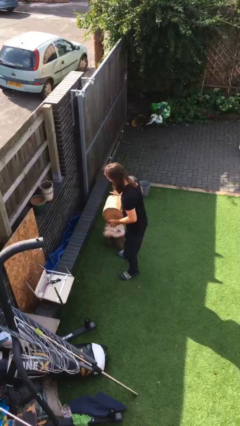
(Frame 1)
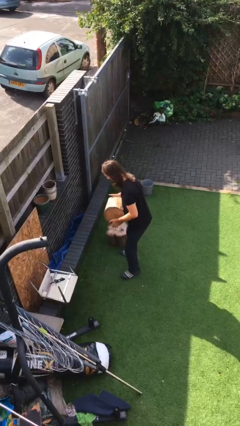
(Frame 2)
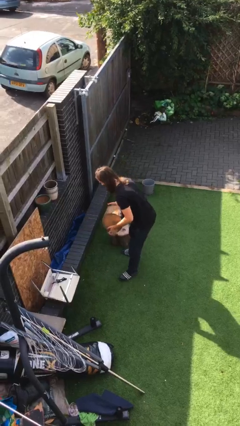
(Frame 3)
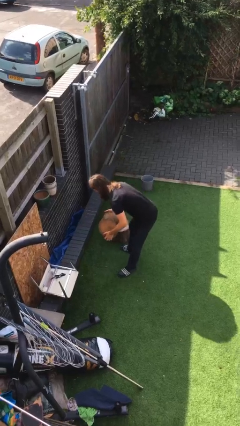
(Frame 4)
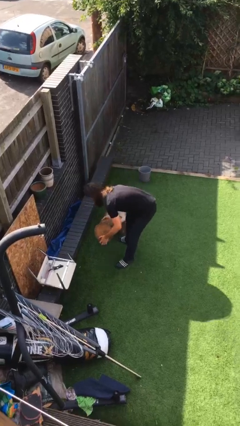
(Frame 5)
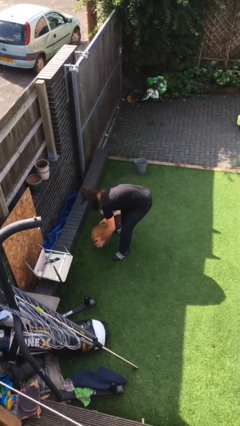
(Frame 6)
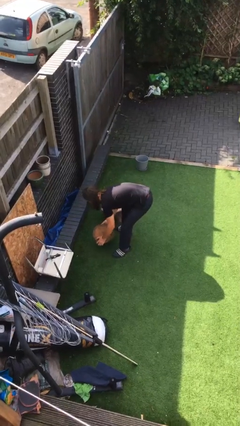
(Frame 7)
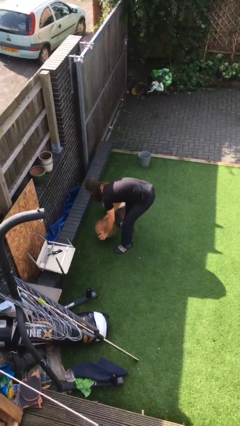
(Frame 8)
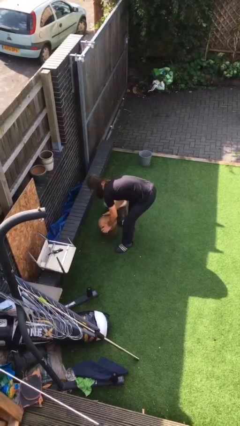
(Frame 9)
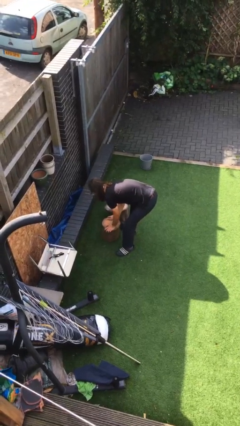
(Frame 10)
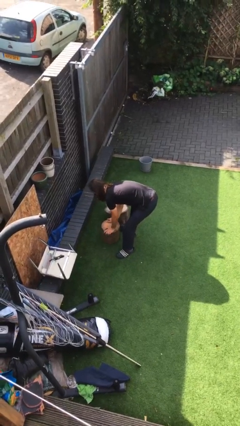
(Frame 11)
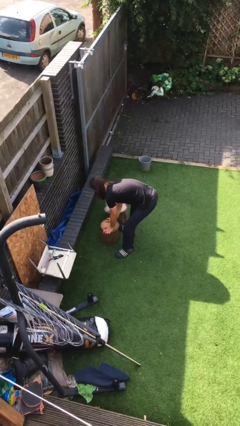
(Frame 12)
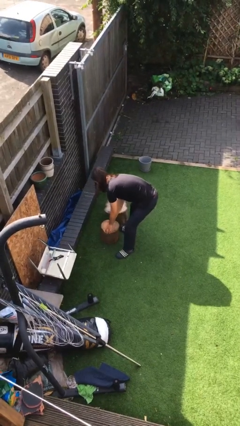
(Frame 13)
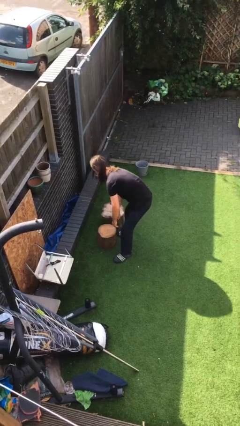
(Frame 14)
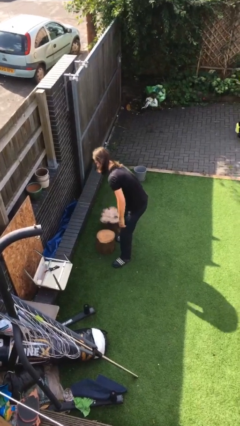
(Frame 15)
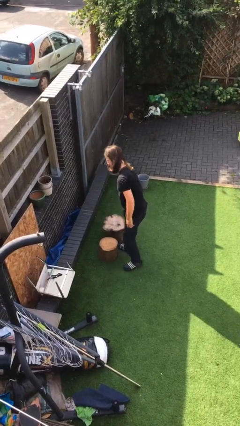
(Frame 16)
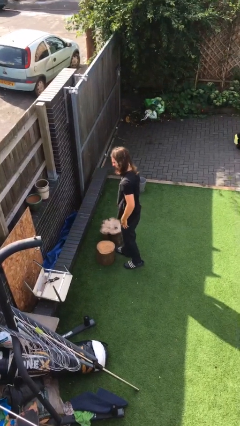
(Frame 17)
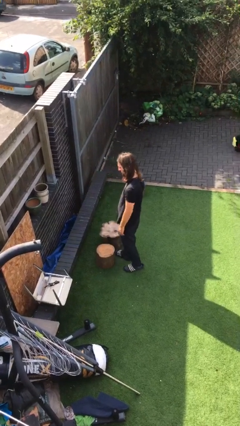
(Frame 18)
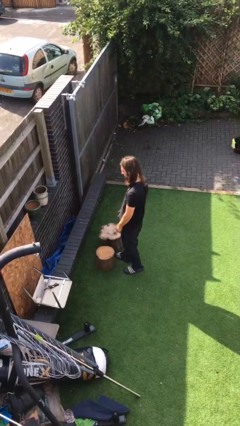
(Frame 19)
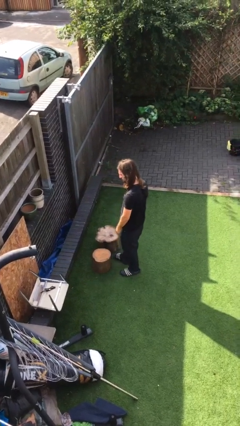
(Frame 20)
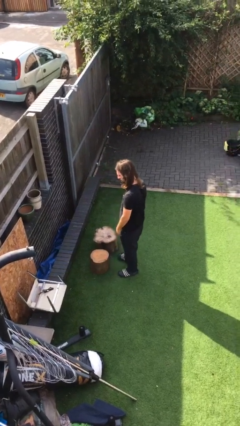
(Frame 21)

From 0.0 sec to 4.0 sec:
person puts down object on floor

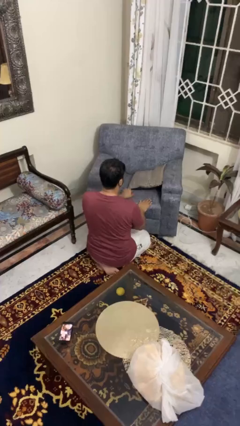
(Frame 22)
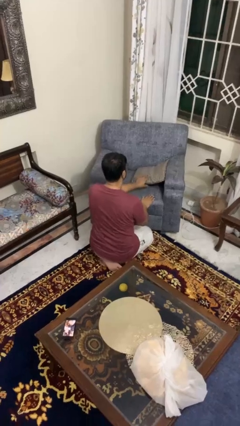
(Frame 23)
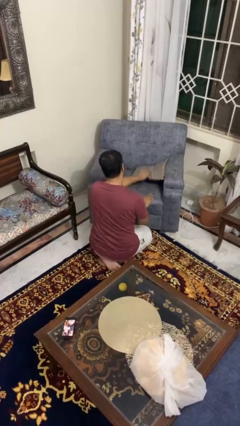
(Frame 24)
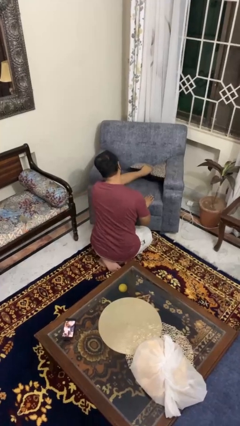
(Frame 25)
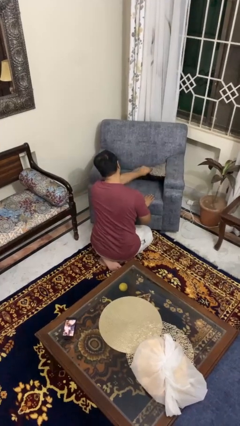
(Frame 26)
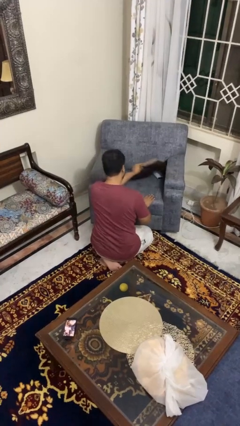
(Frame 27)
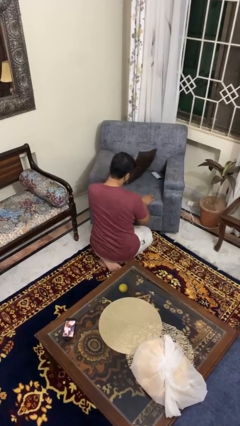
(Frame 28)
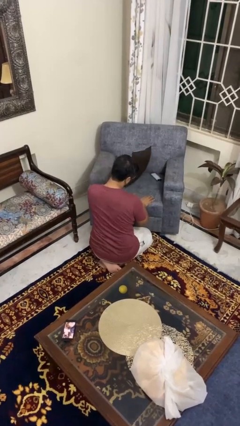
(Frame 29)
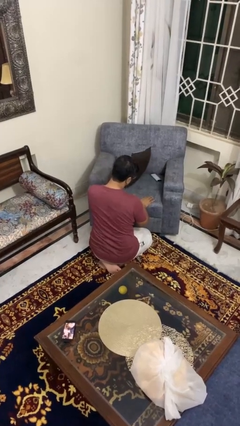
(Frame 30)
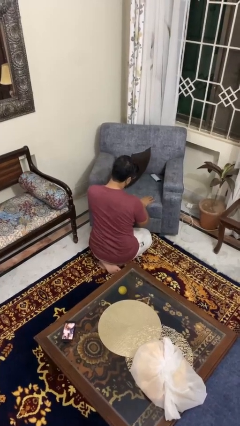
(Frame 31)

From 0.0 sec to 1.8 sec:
person searches in couch

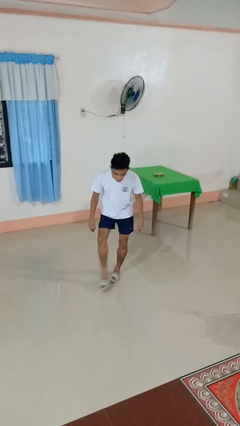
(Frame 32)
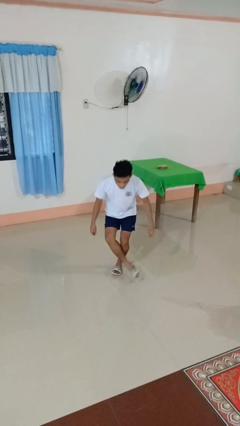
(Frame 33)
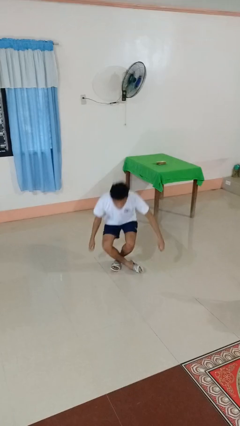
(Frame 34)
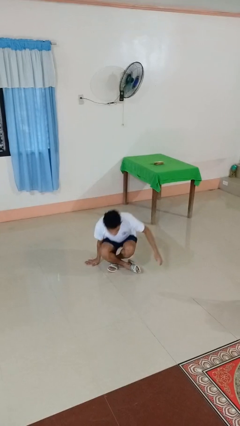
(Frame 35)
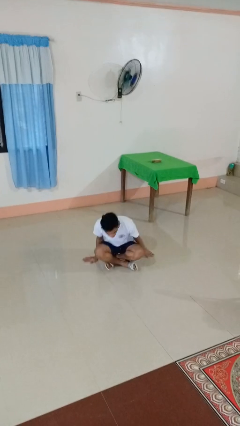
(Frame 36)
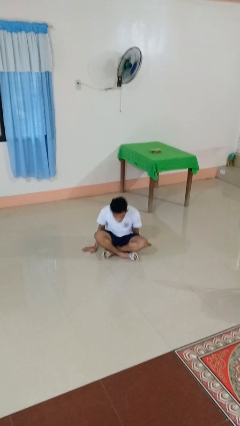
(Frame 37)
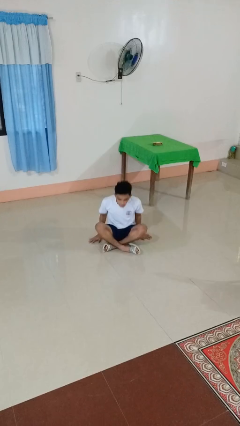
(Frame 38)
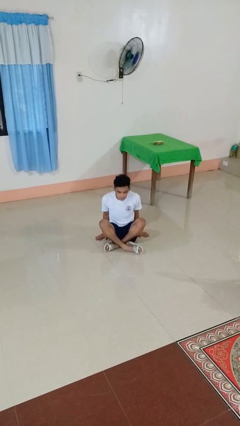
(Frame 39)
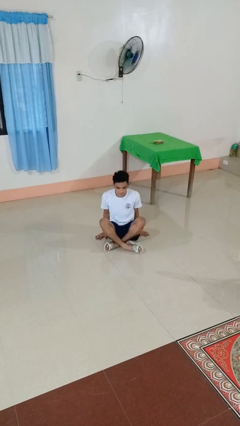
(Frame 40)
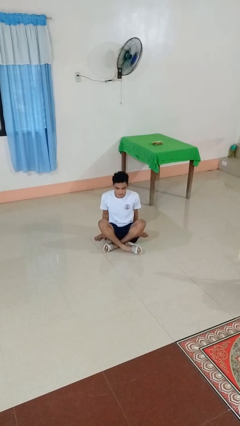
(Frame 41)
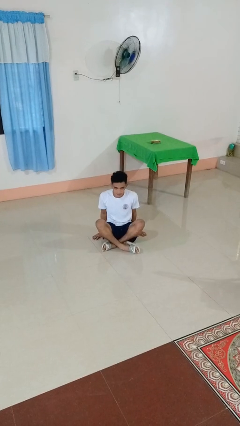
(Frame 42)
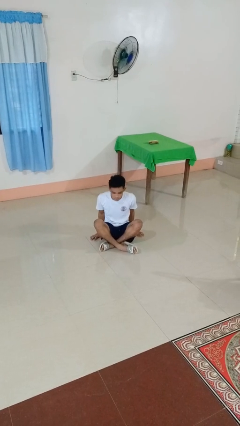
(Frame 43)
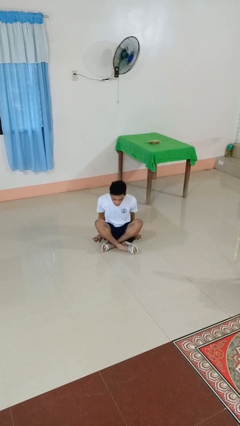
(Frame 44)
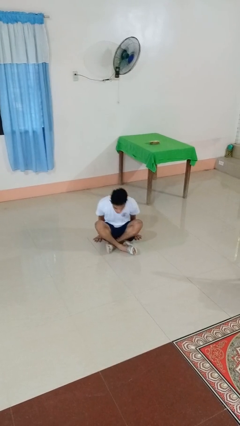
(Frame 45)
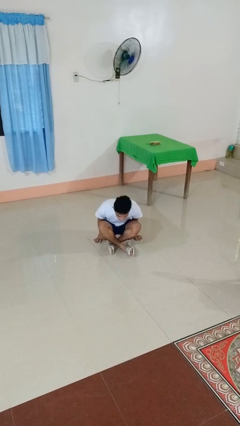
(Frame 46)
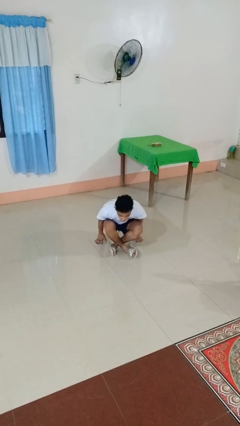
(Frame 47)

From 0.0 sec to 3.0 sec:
person sits crisscross

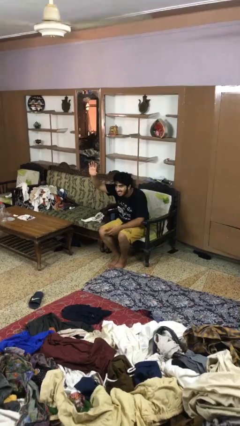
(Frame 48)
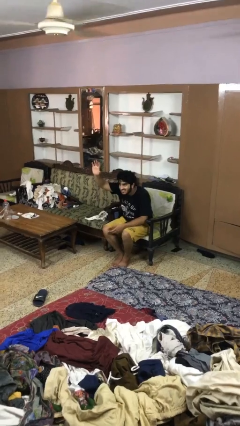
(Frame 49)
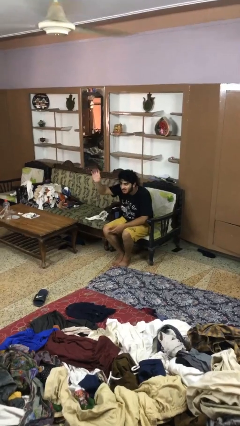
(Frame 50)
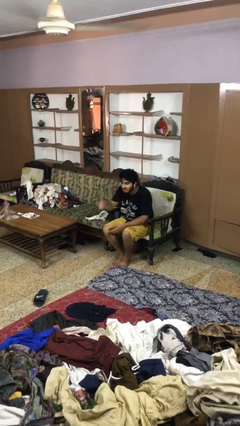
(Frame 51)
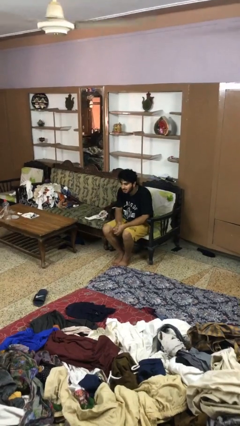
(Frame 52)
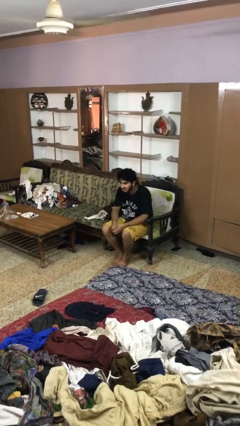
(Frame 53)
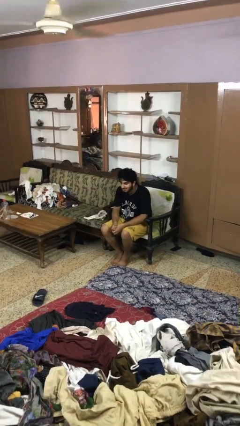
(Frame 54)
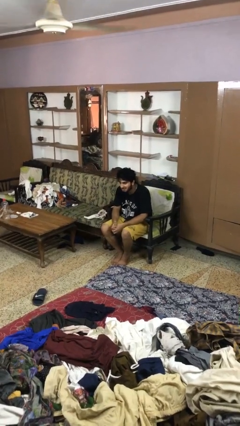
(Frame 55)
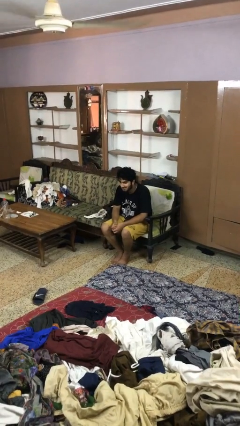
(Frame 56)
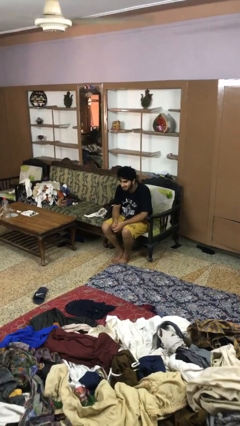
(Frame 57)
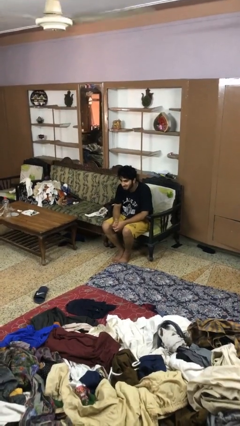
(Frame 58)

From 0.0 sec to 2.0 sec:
person gestures lower hand

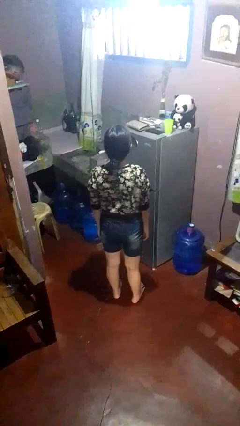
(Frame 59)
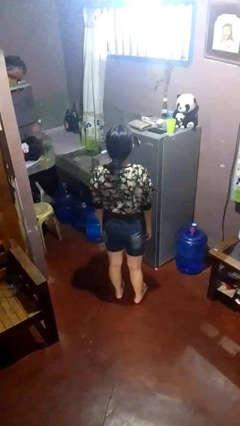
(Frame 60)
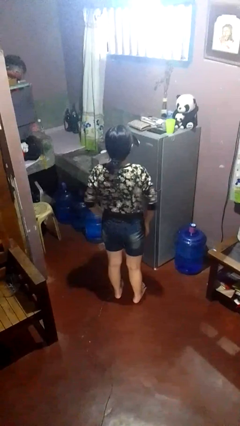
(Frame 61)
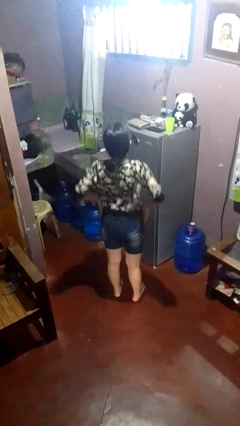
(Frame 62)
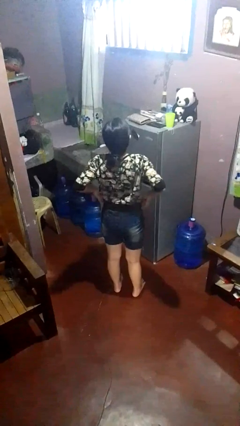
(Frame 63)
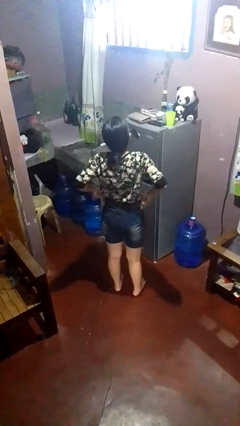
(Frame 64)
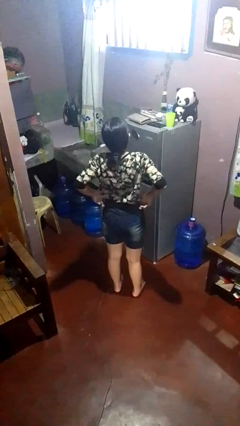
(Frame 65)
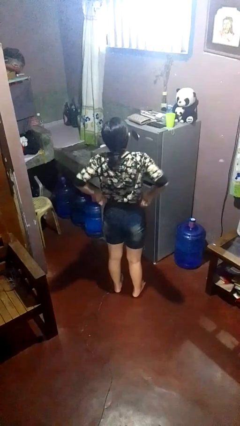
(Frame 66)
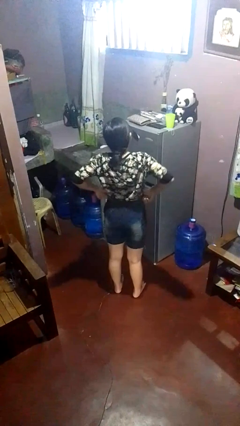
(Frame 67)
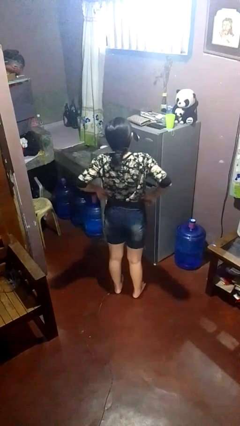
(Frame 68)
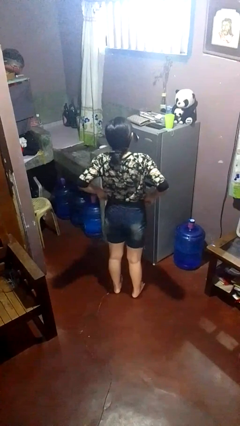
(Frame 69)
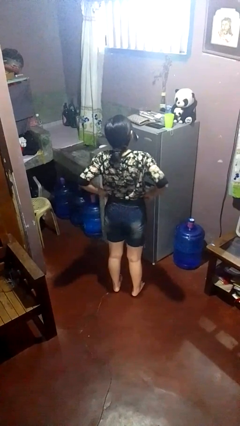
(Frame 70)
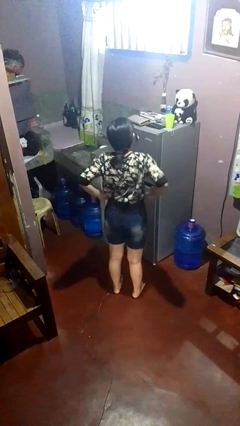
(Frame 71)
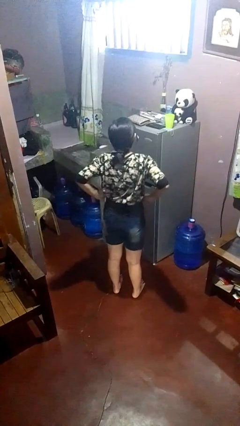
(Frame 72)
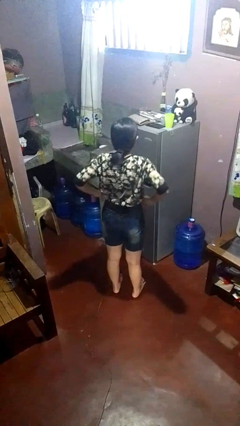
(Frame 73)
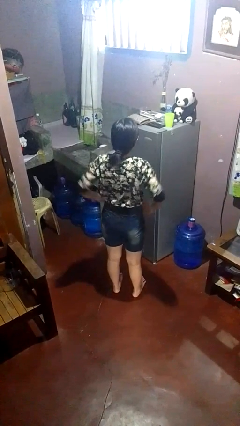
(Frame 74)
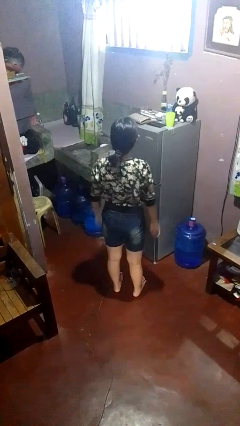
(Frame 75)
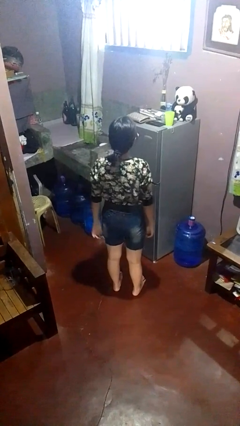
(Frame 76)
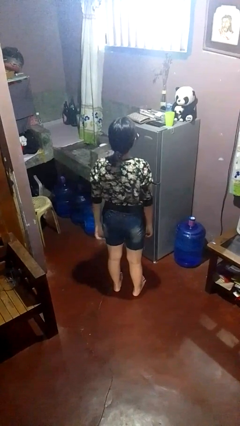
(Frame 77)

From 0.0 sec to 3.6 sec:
person hikes up pants

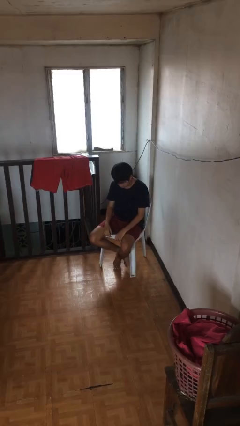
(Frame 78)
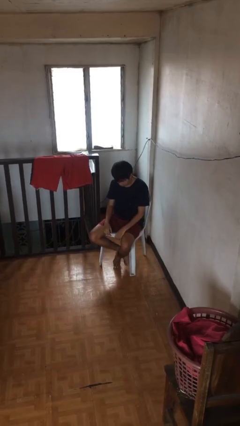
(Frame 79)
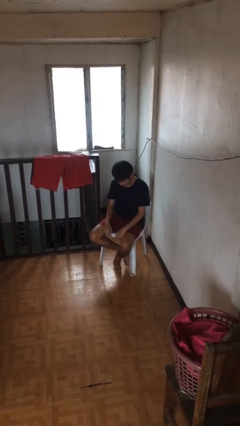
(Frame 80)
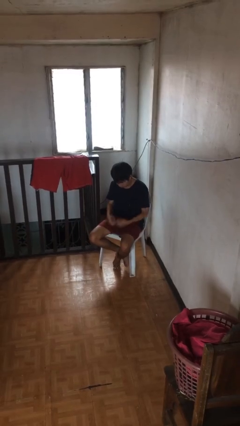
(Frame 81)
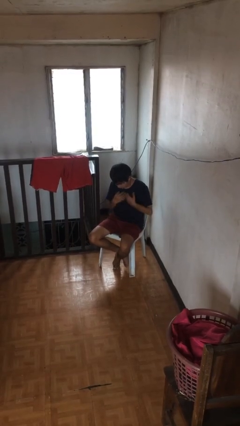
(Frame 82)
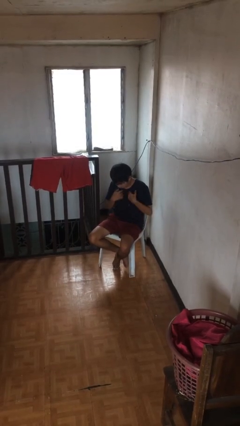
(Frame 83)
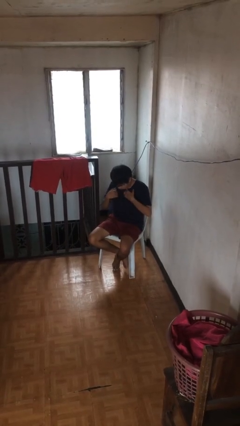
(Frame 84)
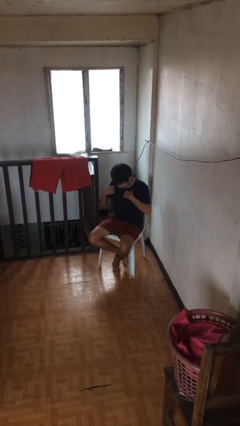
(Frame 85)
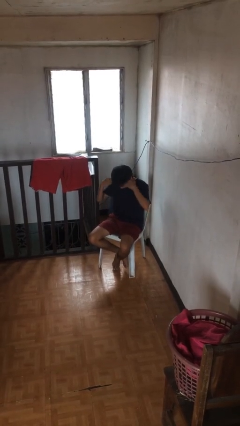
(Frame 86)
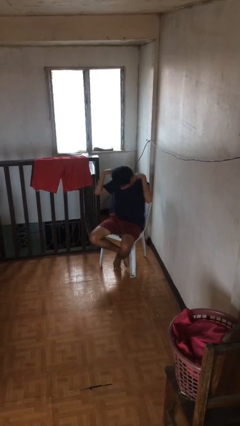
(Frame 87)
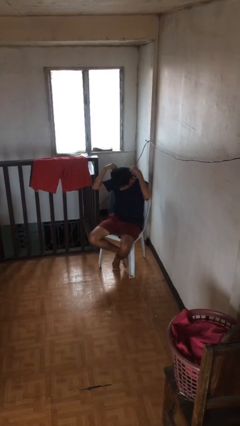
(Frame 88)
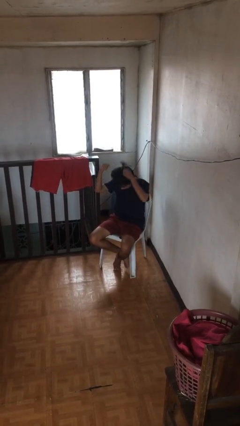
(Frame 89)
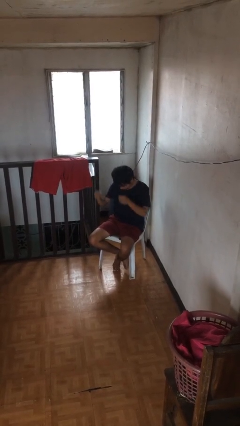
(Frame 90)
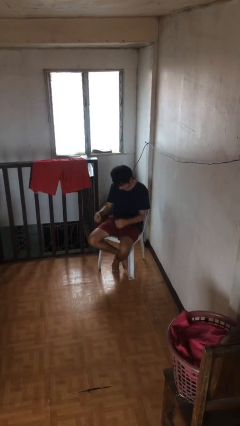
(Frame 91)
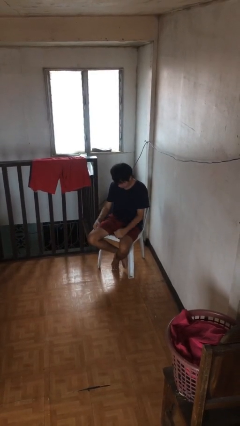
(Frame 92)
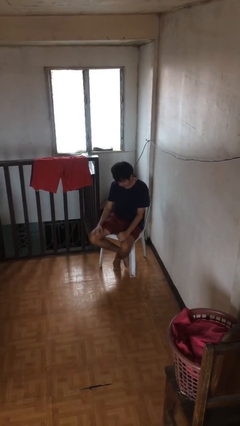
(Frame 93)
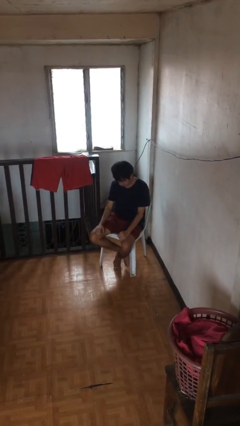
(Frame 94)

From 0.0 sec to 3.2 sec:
person takes off necklace
